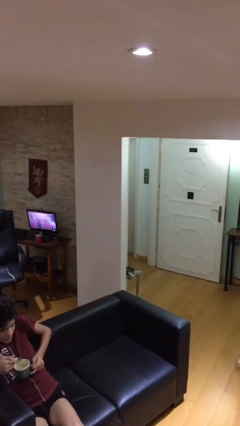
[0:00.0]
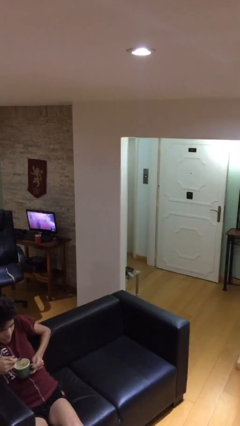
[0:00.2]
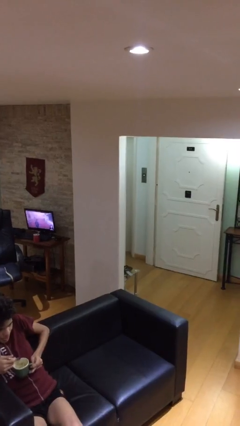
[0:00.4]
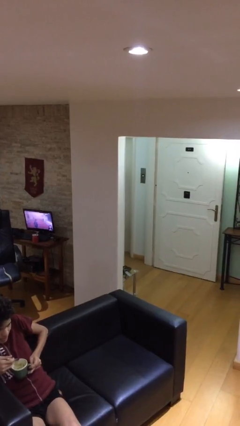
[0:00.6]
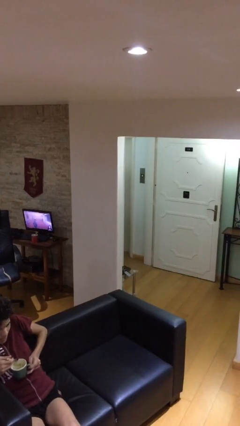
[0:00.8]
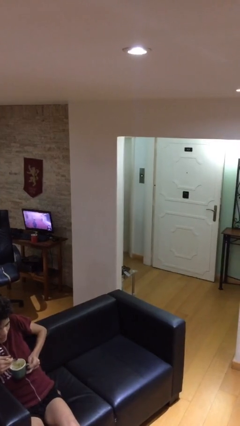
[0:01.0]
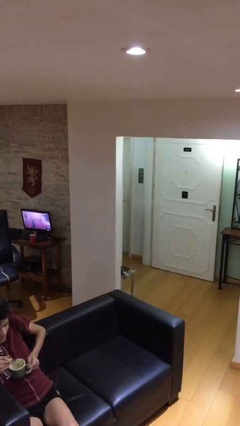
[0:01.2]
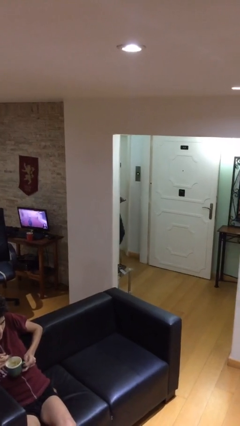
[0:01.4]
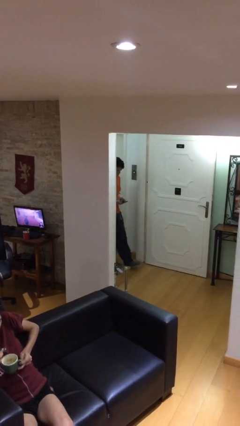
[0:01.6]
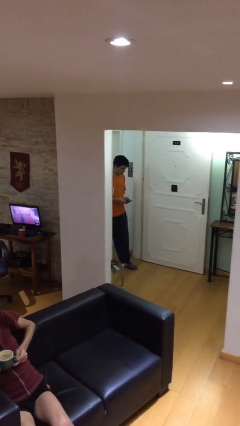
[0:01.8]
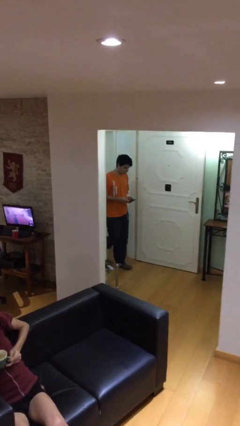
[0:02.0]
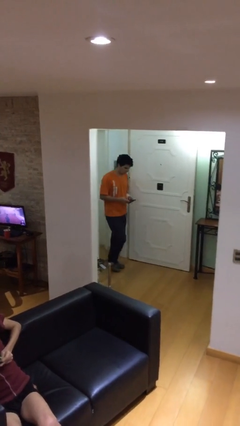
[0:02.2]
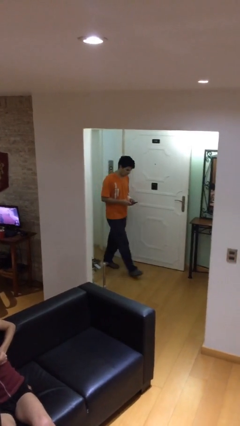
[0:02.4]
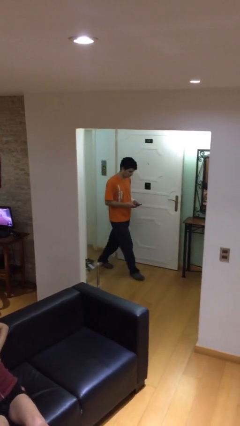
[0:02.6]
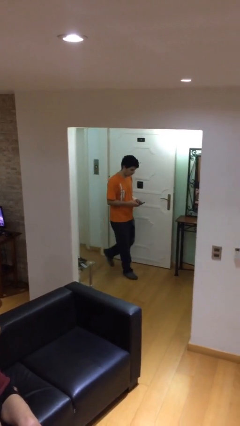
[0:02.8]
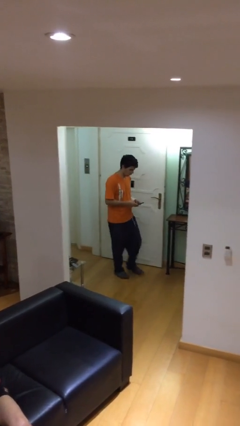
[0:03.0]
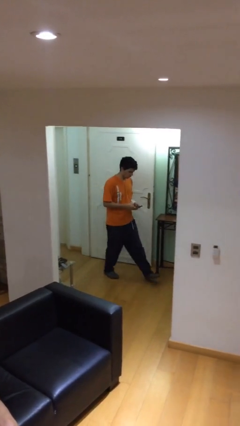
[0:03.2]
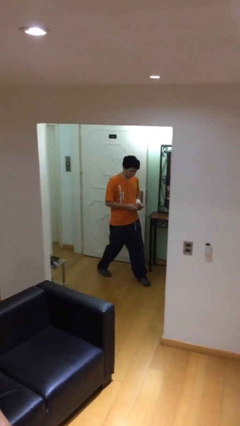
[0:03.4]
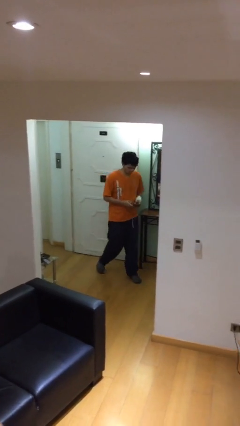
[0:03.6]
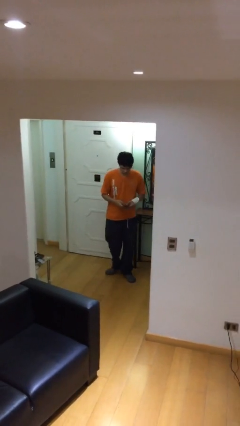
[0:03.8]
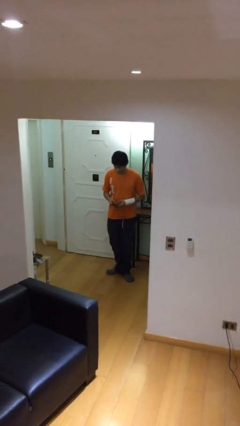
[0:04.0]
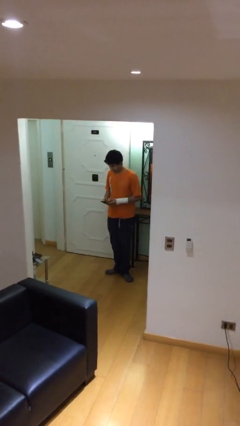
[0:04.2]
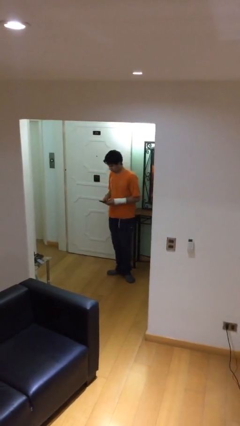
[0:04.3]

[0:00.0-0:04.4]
person enters scene through structure

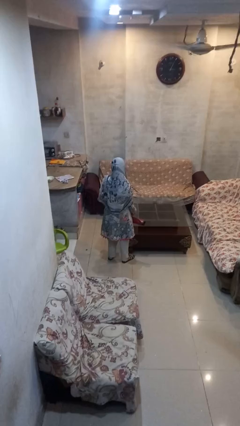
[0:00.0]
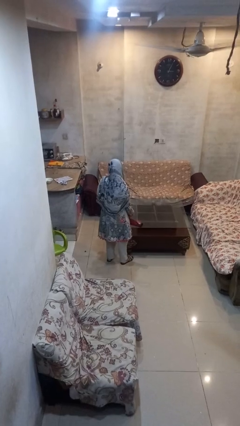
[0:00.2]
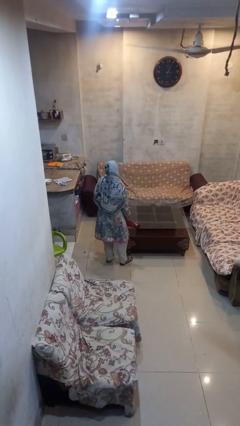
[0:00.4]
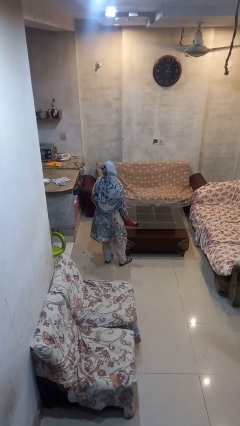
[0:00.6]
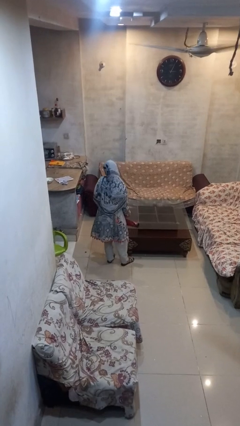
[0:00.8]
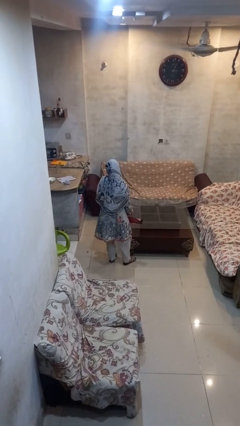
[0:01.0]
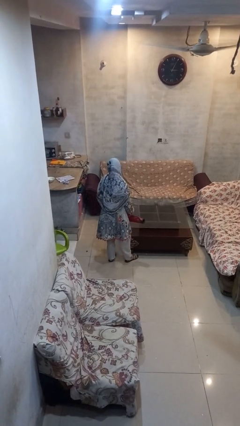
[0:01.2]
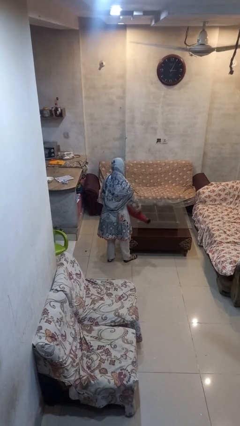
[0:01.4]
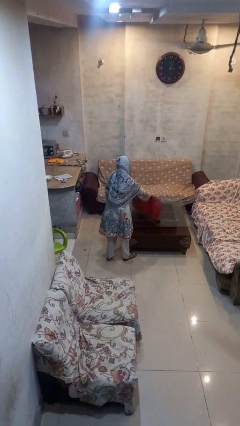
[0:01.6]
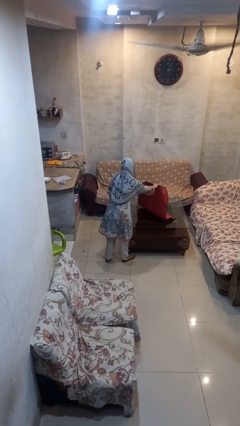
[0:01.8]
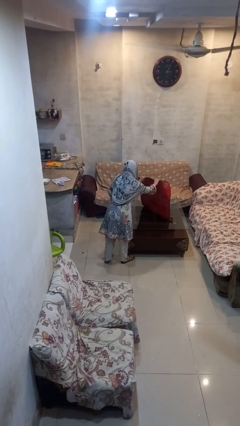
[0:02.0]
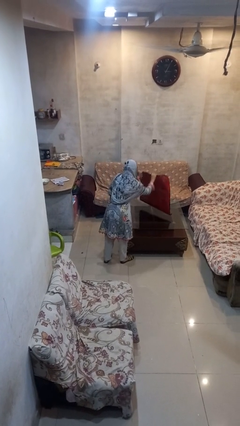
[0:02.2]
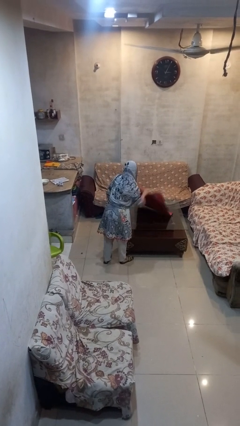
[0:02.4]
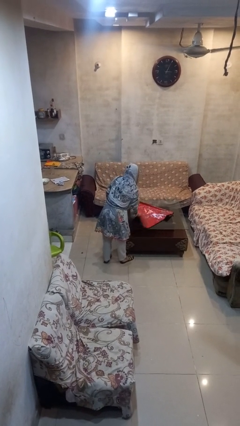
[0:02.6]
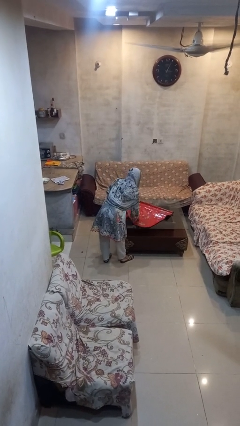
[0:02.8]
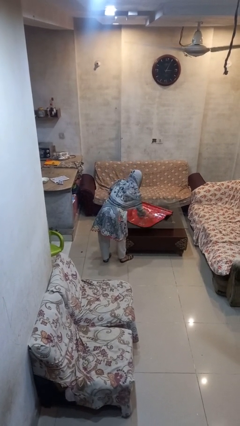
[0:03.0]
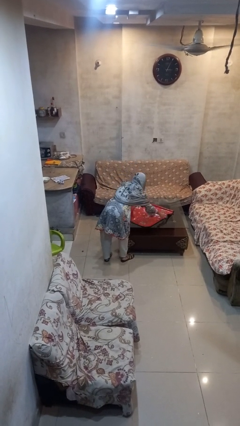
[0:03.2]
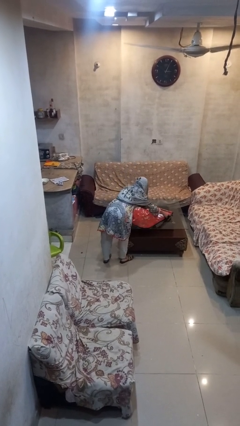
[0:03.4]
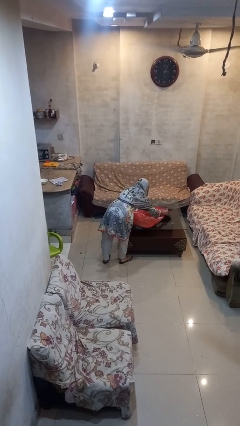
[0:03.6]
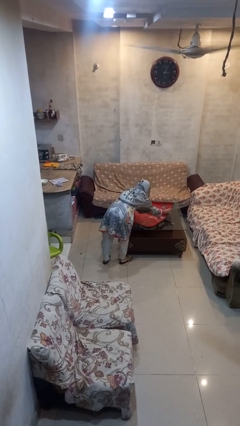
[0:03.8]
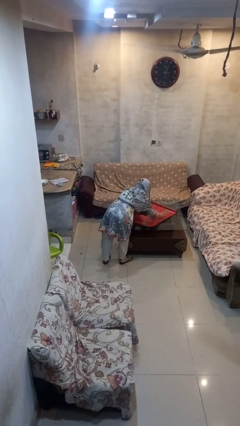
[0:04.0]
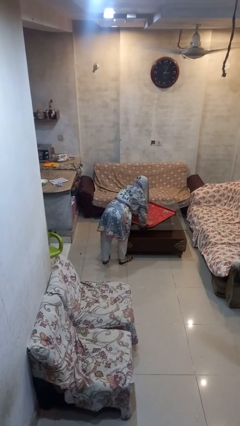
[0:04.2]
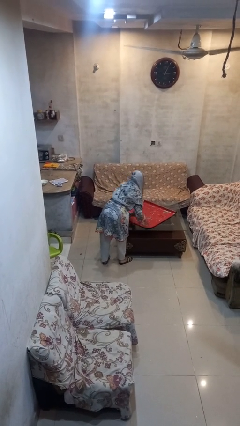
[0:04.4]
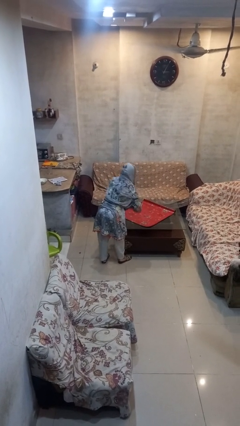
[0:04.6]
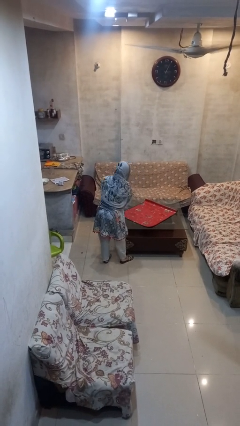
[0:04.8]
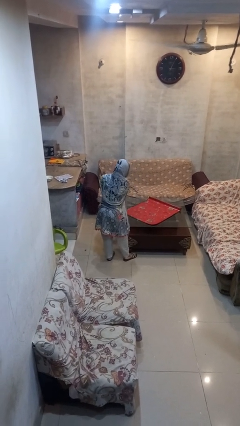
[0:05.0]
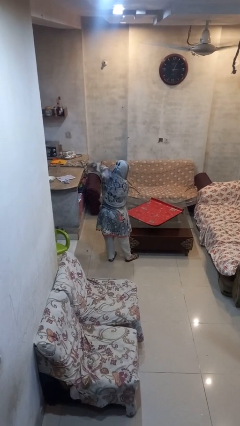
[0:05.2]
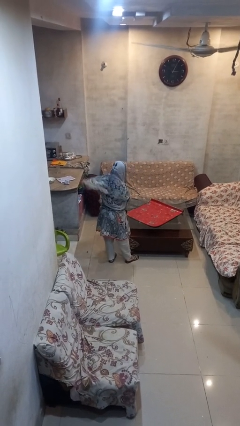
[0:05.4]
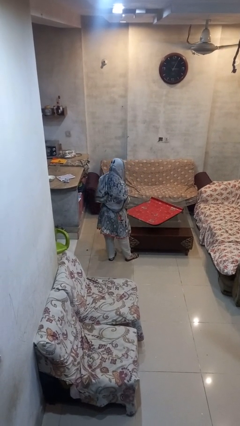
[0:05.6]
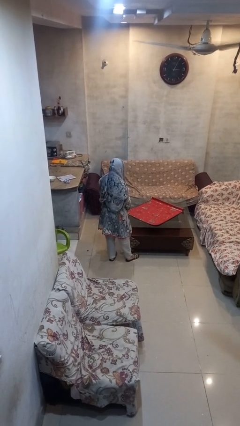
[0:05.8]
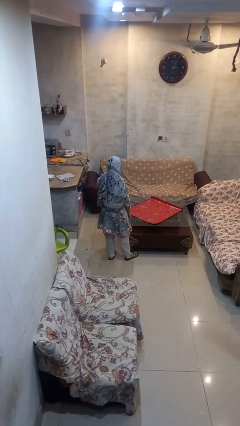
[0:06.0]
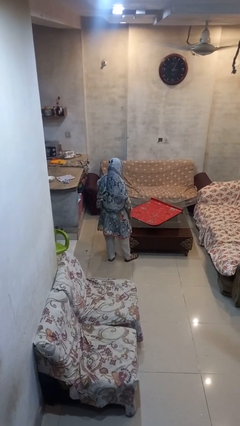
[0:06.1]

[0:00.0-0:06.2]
person spreads tablecloth

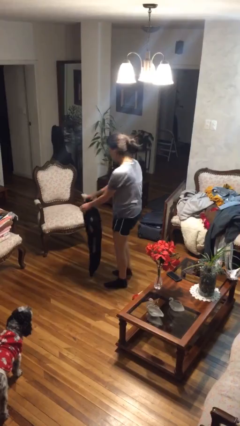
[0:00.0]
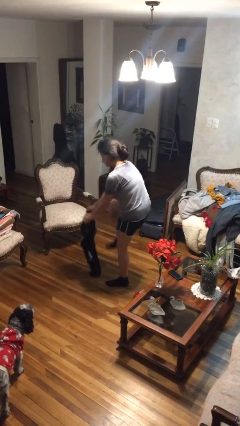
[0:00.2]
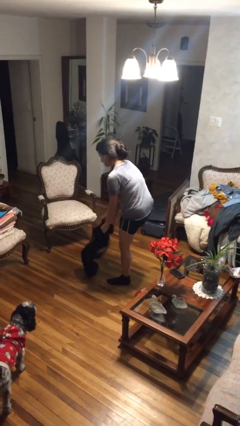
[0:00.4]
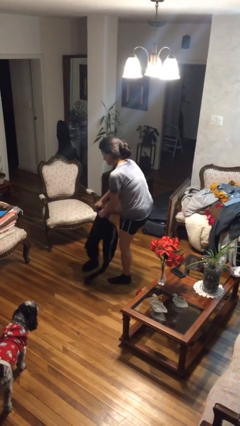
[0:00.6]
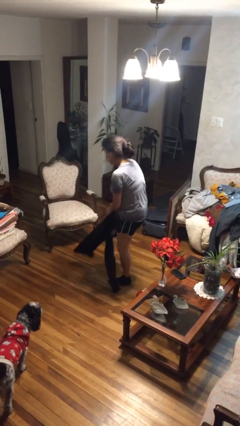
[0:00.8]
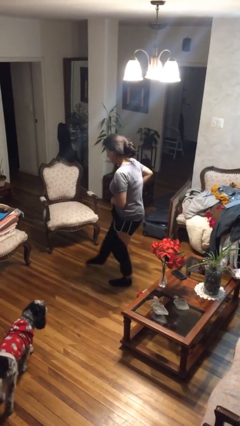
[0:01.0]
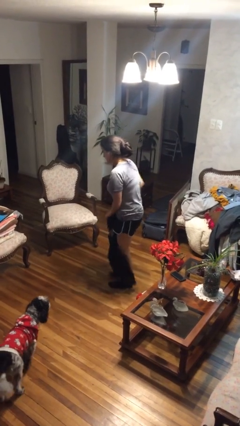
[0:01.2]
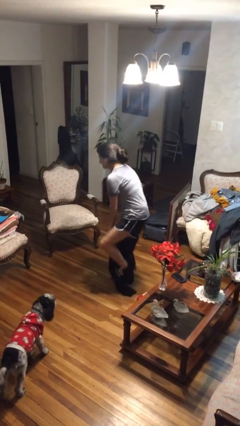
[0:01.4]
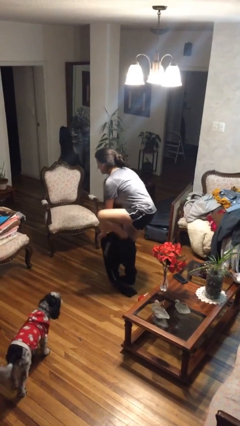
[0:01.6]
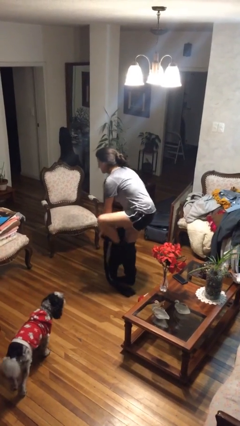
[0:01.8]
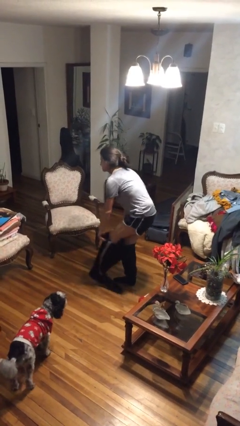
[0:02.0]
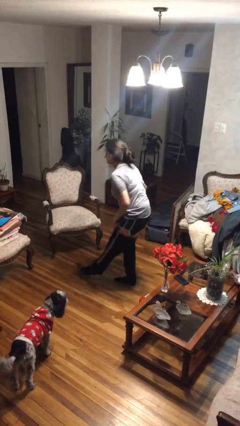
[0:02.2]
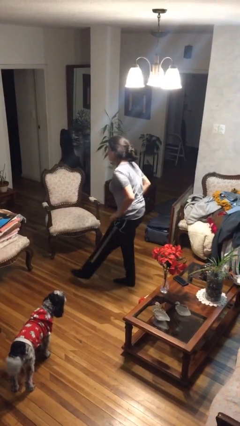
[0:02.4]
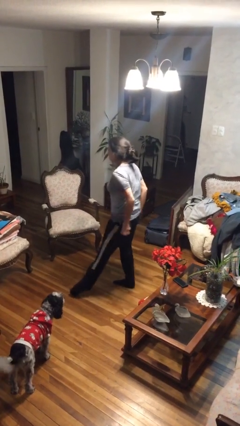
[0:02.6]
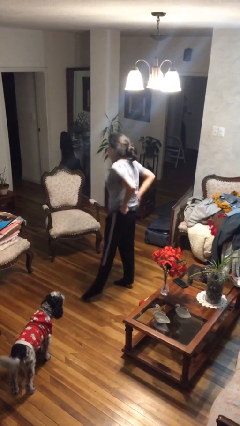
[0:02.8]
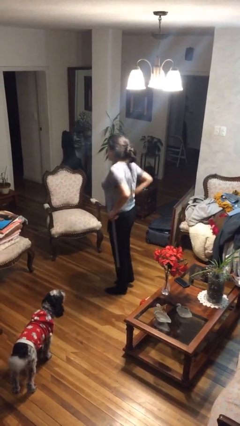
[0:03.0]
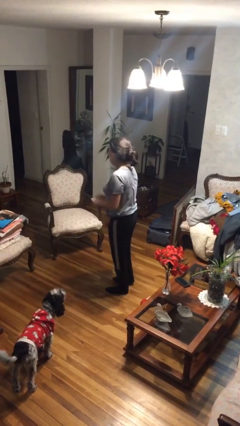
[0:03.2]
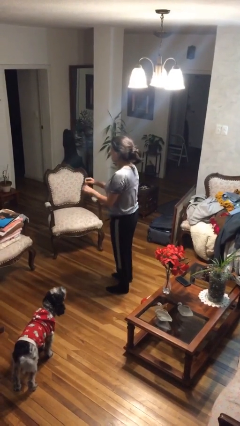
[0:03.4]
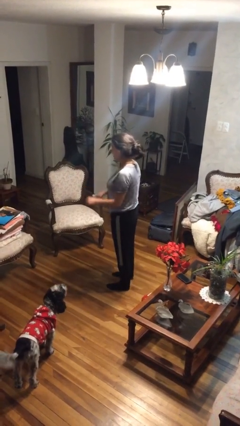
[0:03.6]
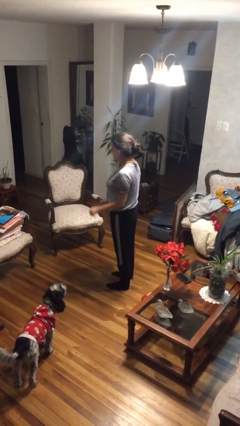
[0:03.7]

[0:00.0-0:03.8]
person puts on pants

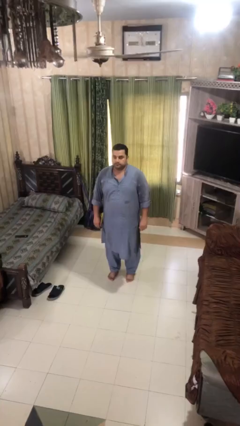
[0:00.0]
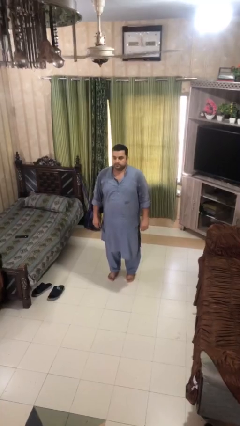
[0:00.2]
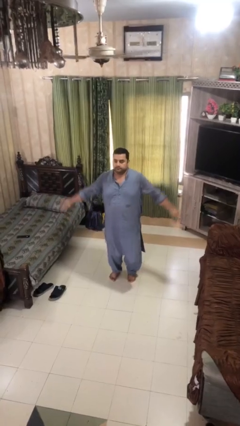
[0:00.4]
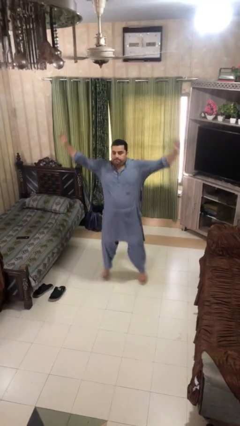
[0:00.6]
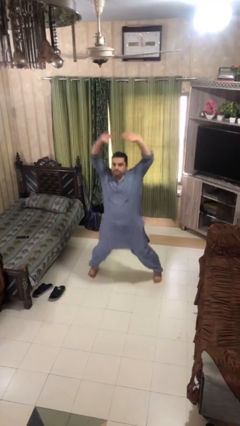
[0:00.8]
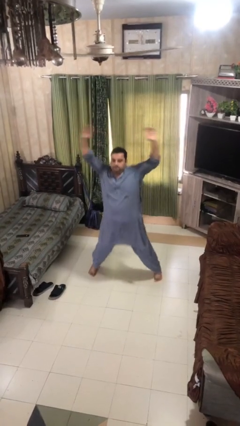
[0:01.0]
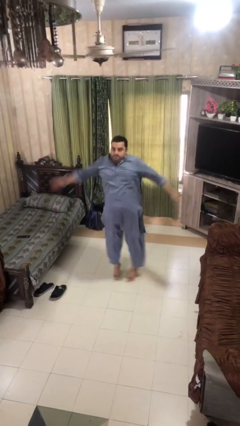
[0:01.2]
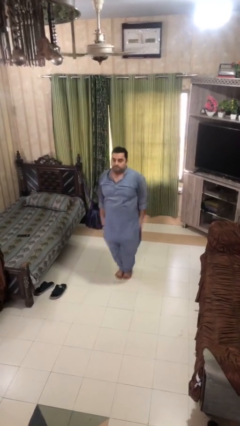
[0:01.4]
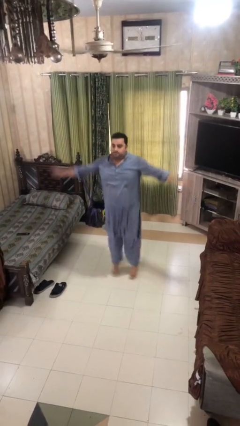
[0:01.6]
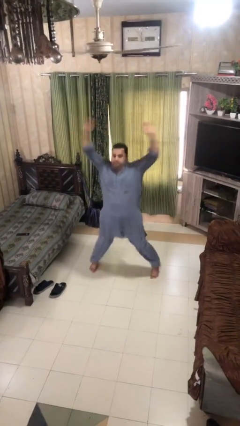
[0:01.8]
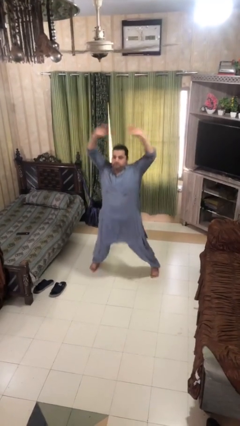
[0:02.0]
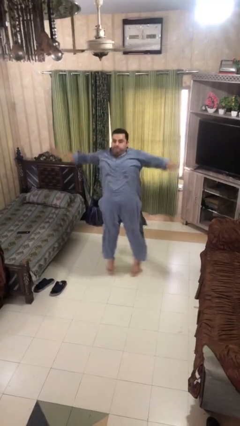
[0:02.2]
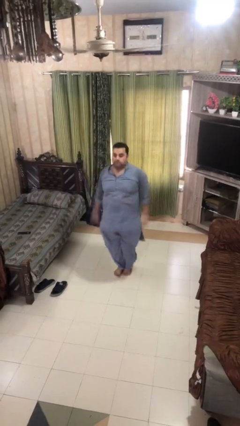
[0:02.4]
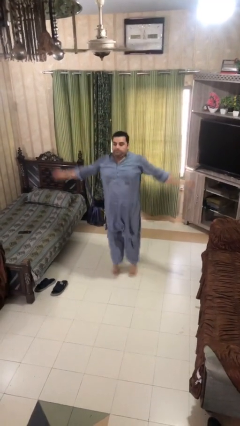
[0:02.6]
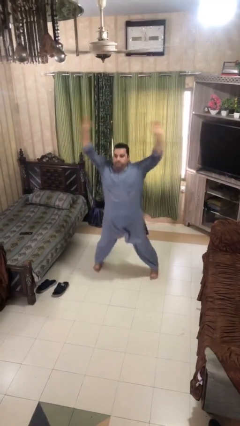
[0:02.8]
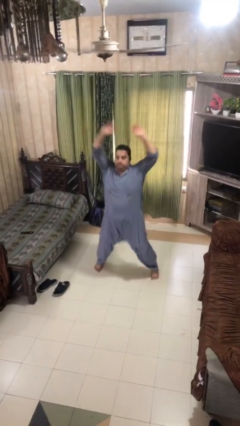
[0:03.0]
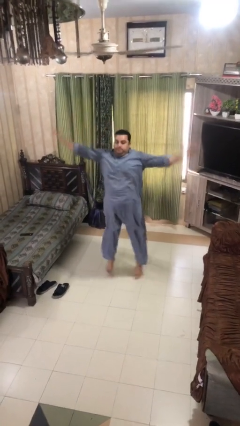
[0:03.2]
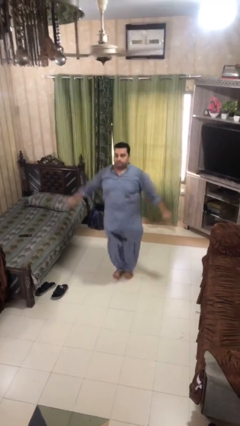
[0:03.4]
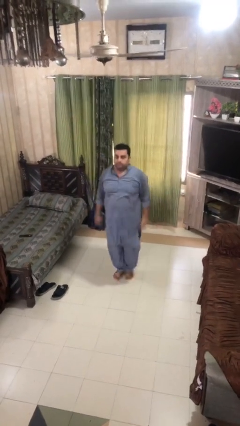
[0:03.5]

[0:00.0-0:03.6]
person exercises with jumping jacks
